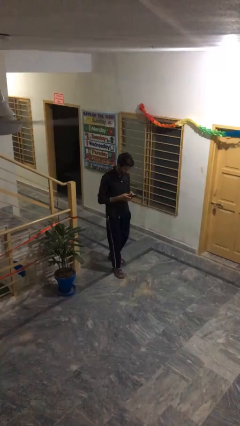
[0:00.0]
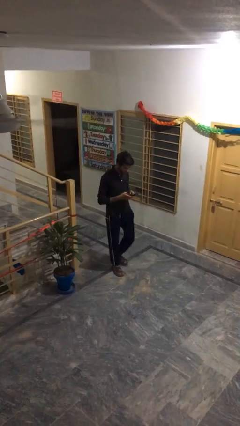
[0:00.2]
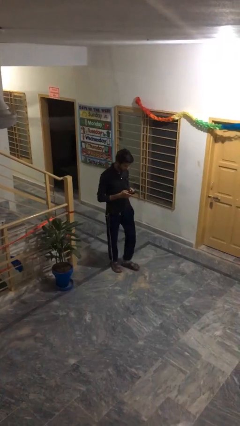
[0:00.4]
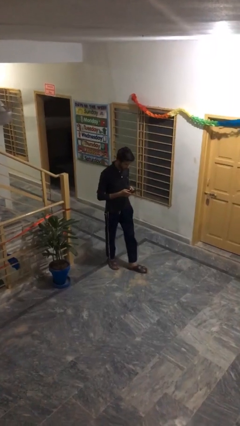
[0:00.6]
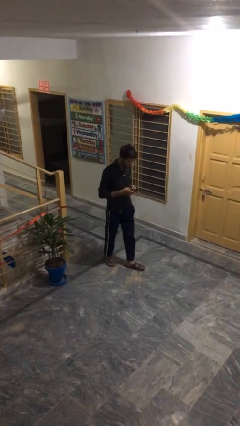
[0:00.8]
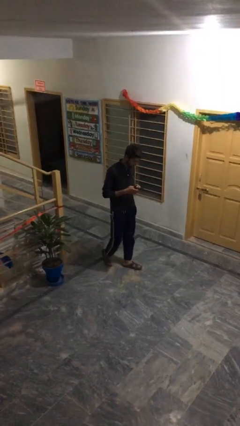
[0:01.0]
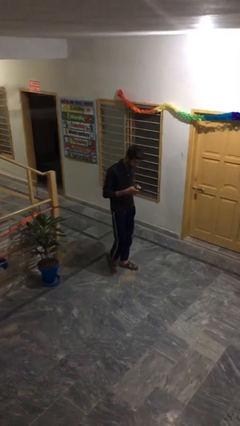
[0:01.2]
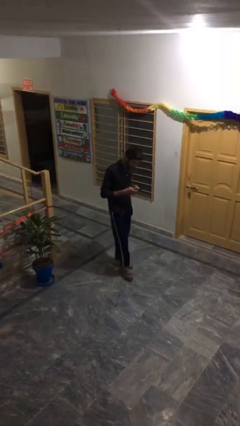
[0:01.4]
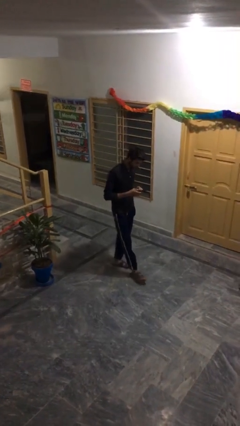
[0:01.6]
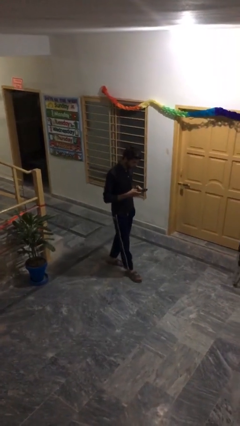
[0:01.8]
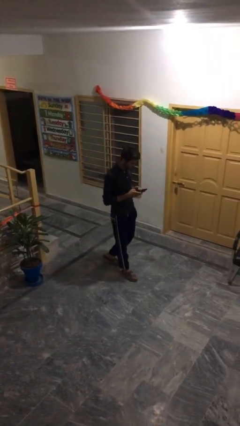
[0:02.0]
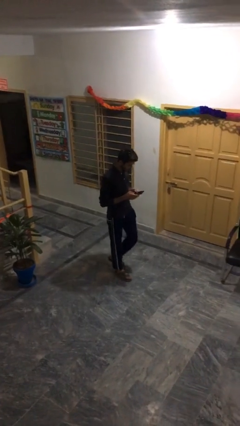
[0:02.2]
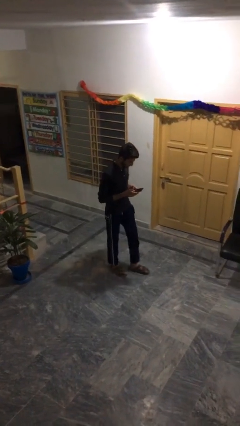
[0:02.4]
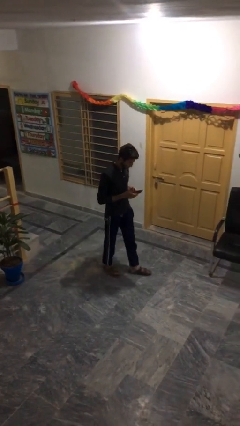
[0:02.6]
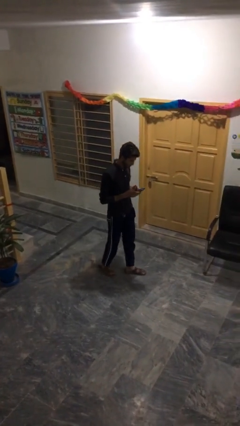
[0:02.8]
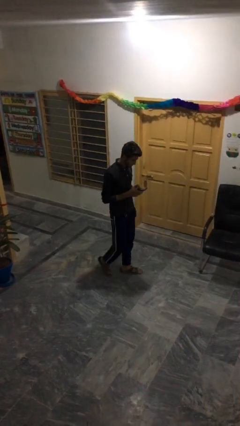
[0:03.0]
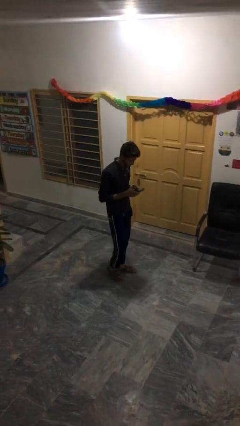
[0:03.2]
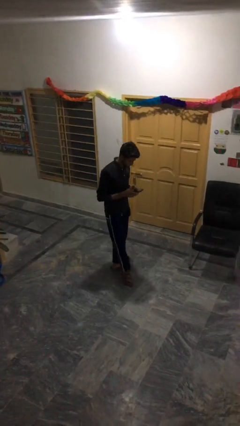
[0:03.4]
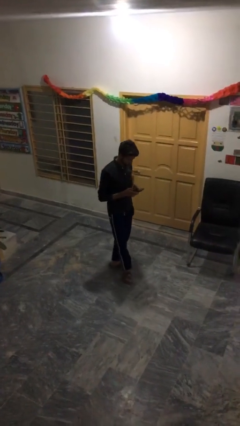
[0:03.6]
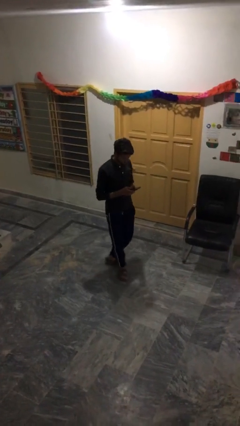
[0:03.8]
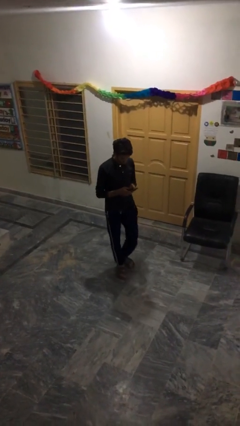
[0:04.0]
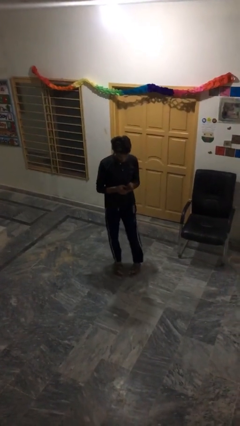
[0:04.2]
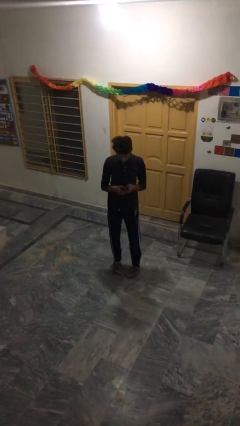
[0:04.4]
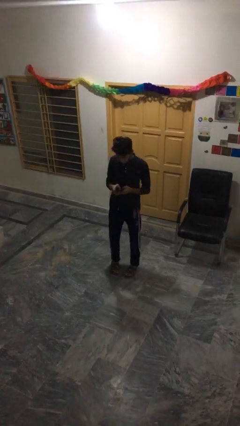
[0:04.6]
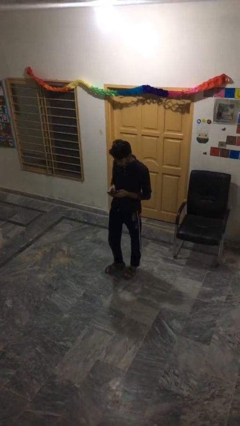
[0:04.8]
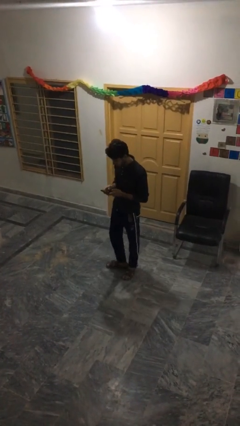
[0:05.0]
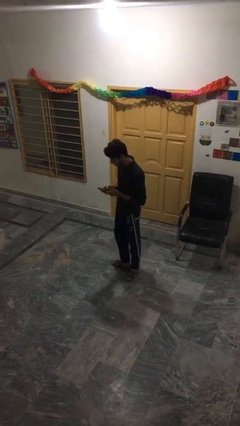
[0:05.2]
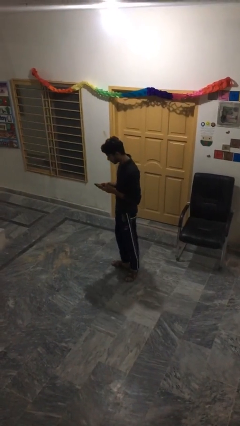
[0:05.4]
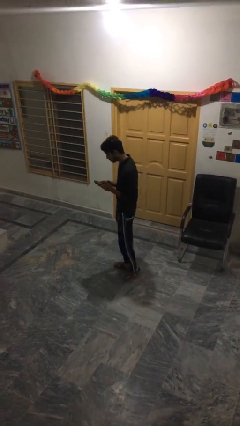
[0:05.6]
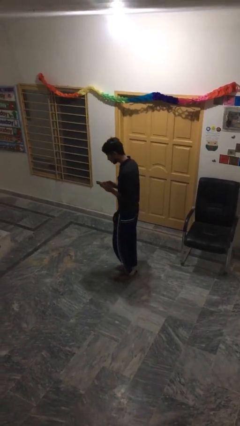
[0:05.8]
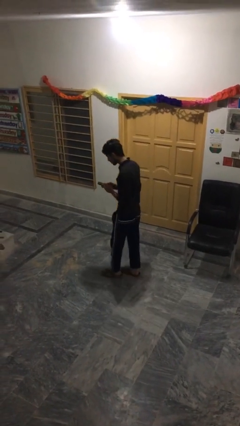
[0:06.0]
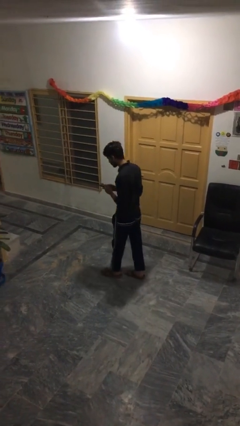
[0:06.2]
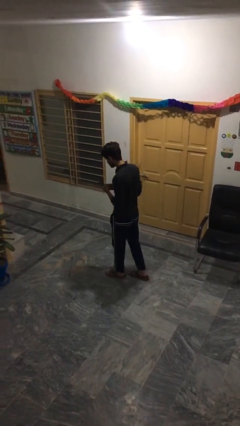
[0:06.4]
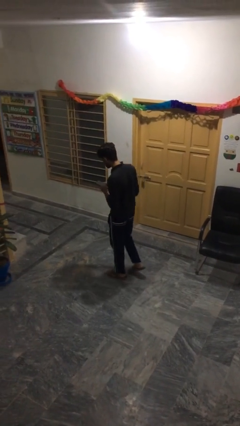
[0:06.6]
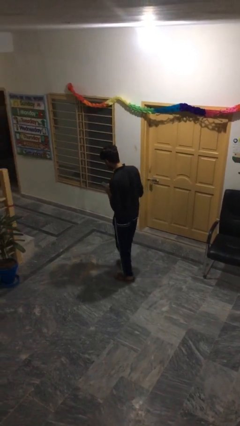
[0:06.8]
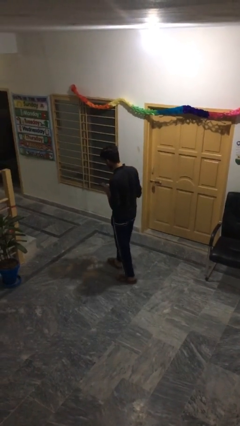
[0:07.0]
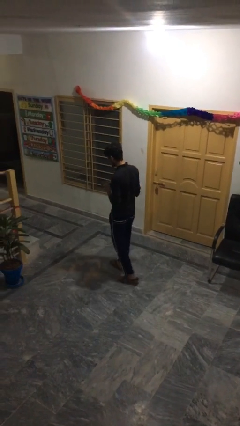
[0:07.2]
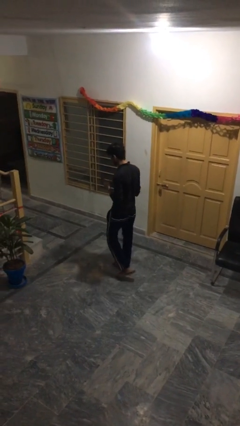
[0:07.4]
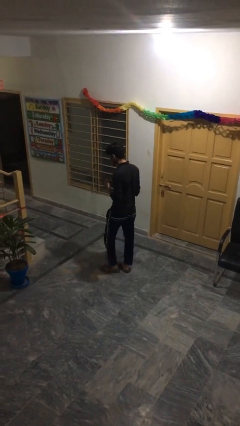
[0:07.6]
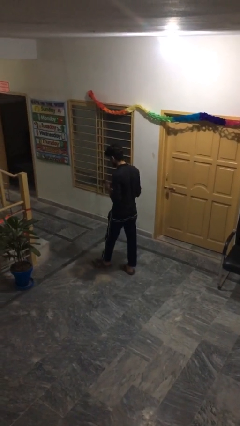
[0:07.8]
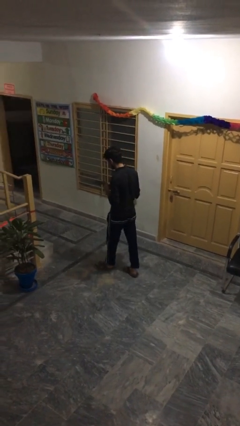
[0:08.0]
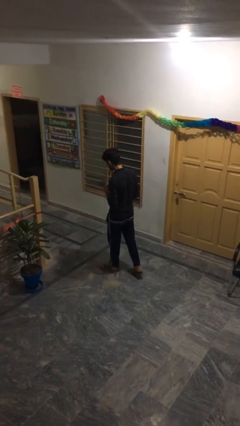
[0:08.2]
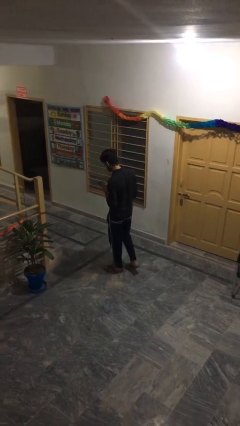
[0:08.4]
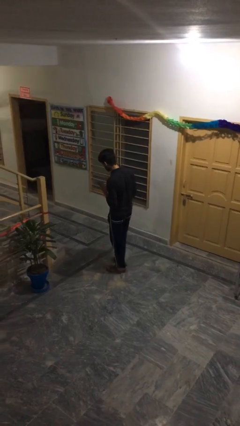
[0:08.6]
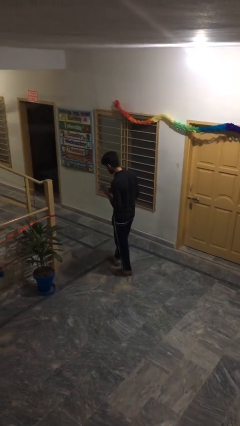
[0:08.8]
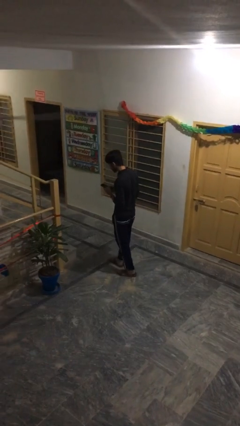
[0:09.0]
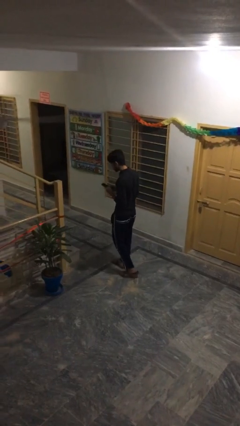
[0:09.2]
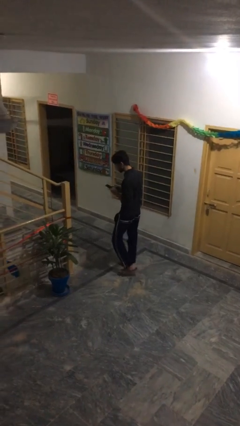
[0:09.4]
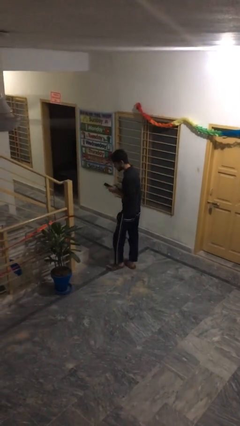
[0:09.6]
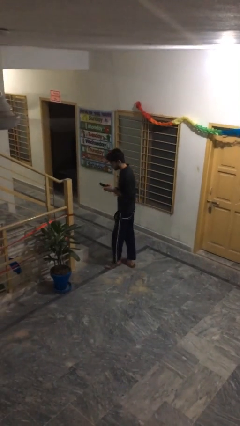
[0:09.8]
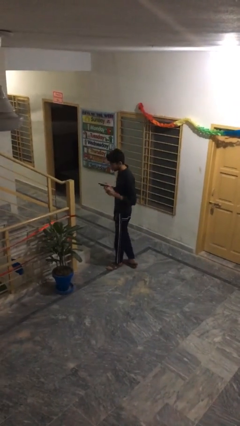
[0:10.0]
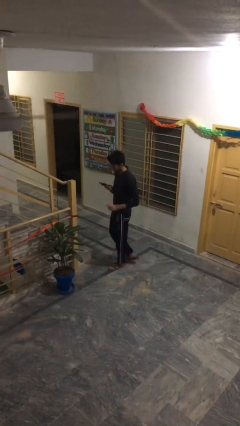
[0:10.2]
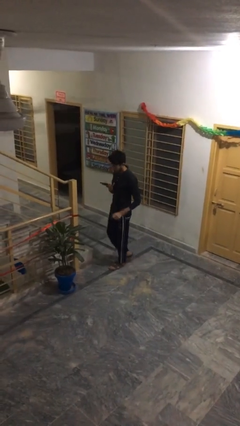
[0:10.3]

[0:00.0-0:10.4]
person texts on phone

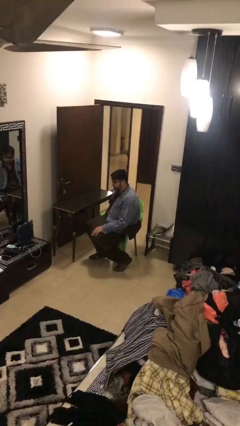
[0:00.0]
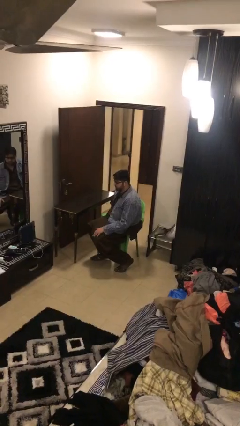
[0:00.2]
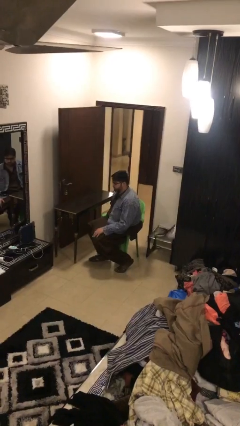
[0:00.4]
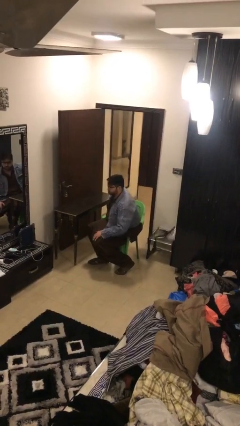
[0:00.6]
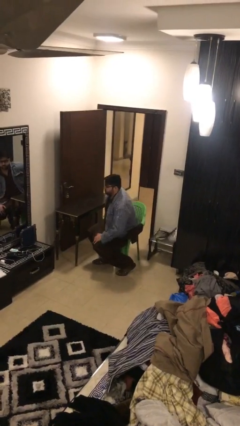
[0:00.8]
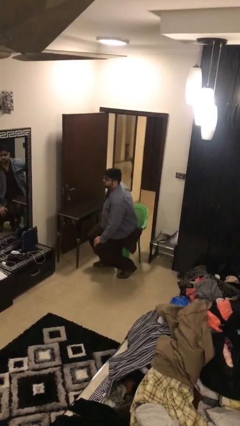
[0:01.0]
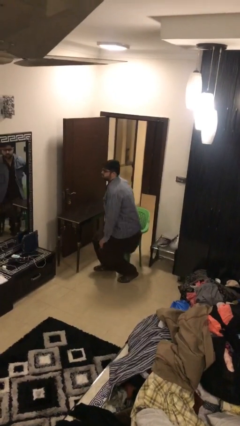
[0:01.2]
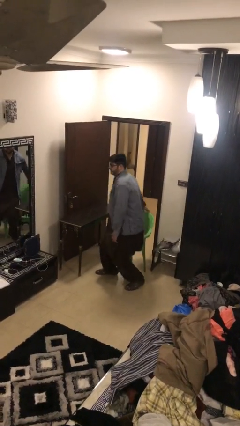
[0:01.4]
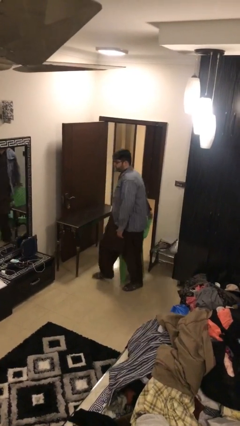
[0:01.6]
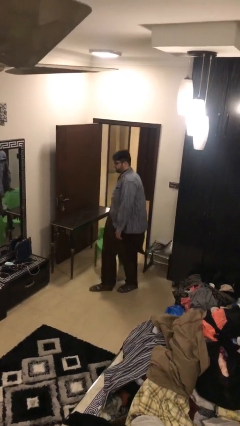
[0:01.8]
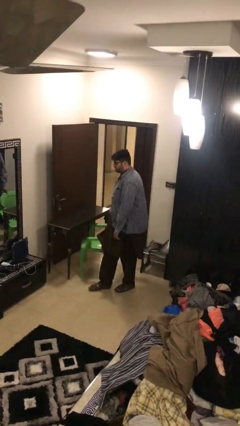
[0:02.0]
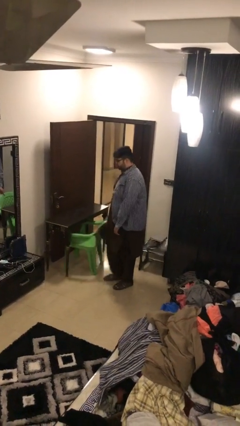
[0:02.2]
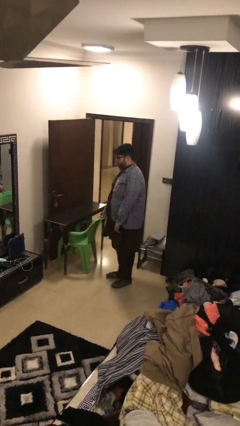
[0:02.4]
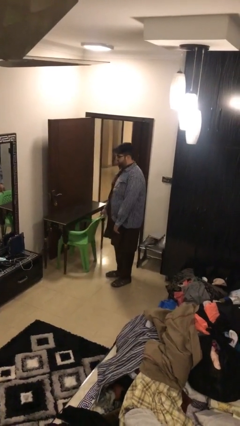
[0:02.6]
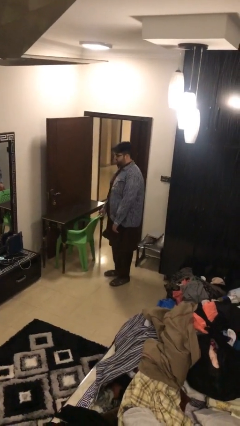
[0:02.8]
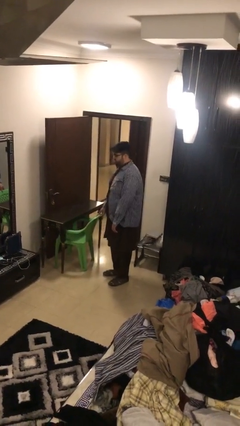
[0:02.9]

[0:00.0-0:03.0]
person stands up

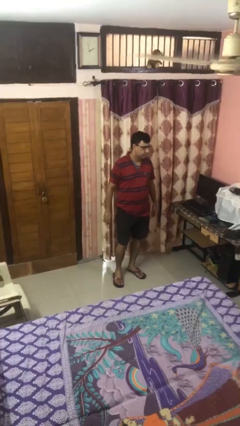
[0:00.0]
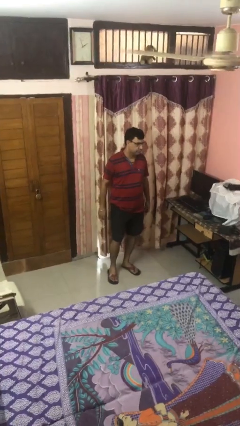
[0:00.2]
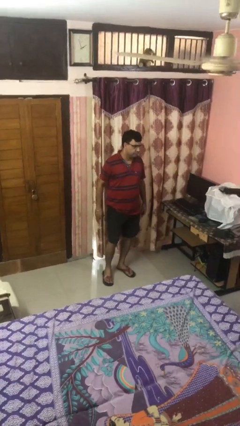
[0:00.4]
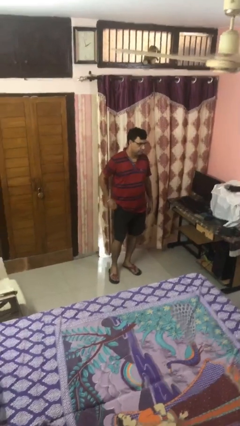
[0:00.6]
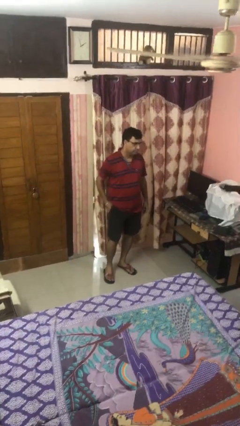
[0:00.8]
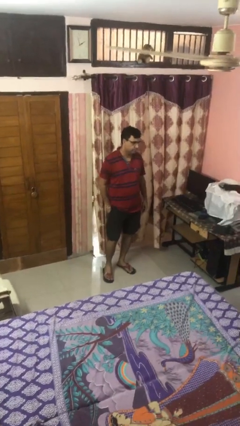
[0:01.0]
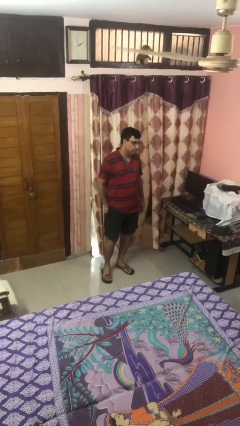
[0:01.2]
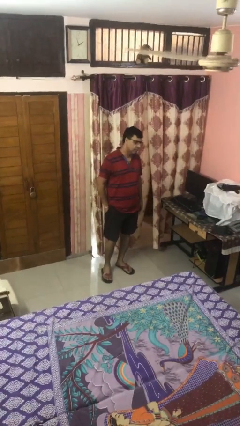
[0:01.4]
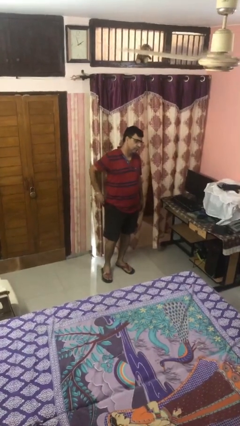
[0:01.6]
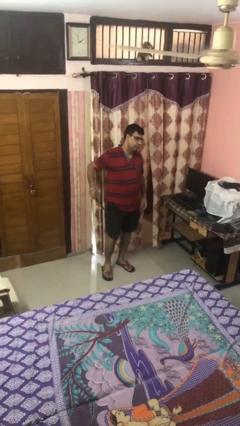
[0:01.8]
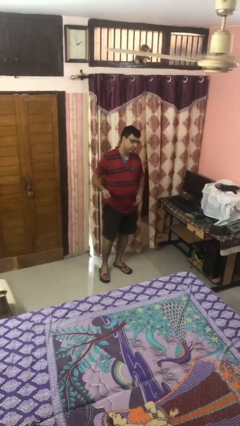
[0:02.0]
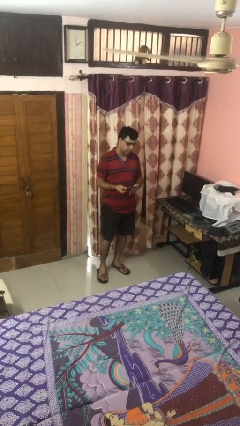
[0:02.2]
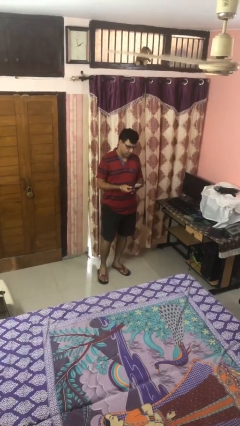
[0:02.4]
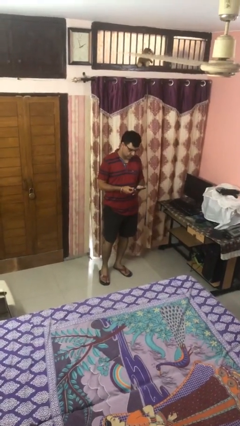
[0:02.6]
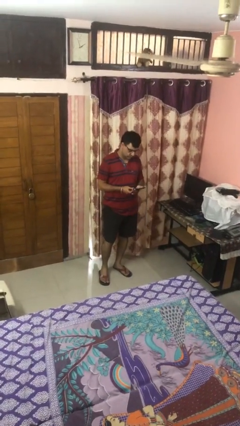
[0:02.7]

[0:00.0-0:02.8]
person takes phone from pocket

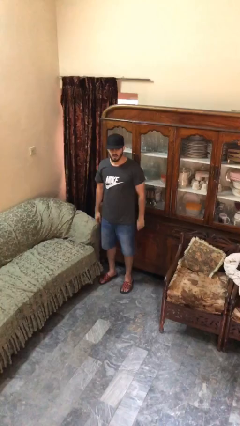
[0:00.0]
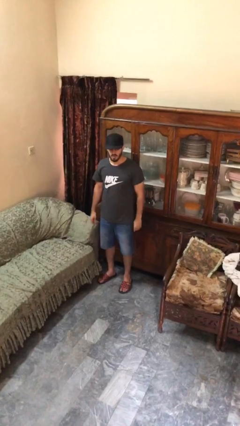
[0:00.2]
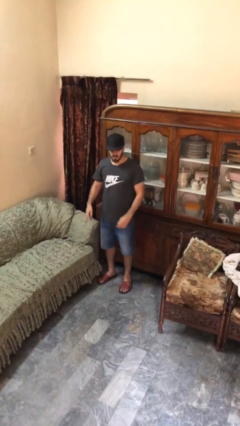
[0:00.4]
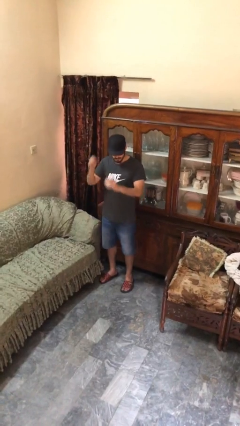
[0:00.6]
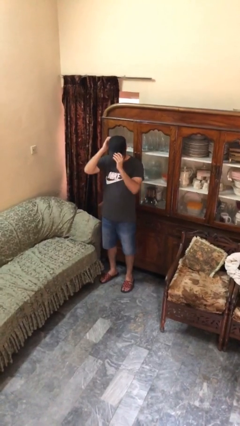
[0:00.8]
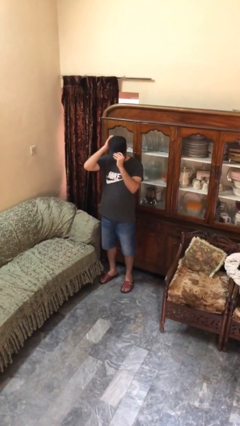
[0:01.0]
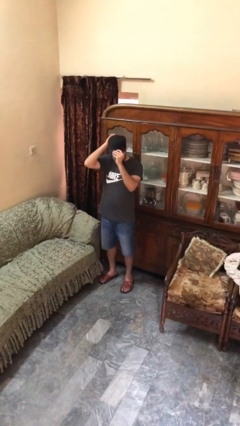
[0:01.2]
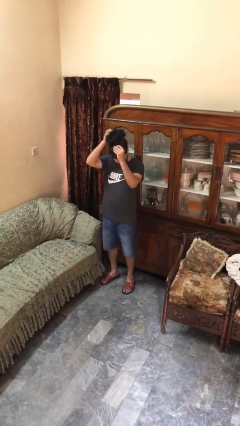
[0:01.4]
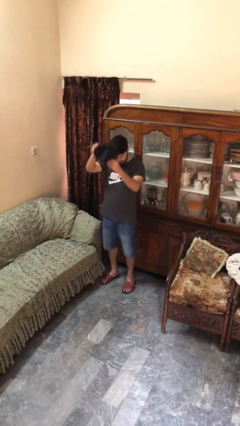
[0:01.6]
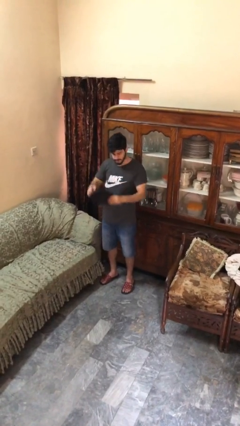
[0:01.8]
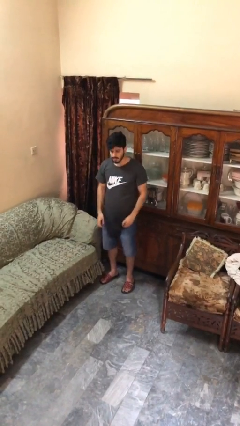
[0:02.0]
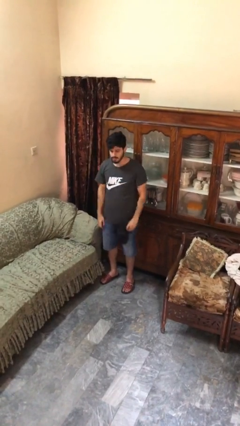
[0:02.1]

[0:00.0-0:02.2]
person takes off hat
